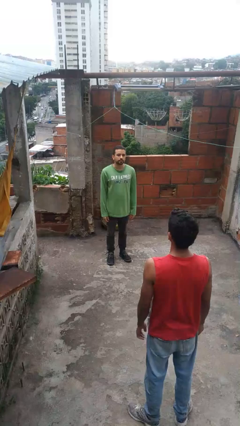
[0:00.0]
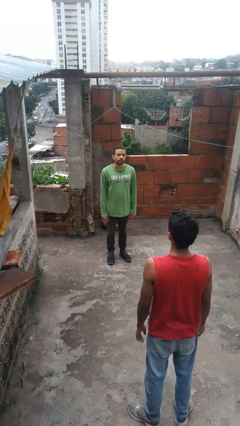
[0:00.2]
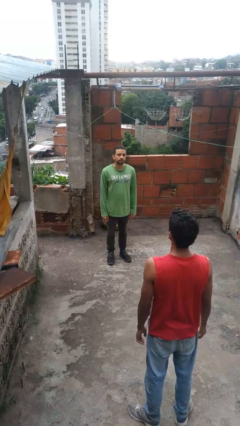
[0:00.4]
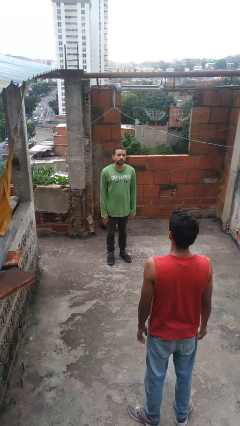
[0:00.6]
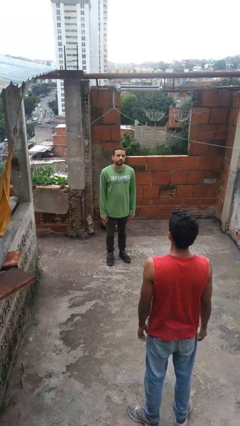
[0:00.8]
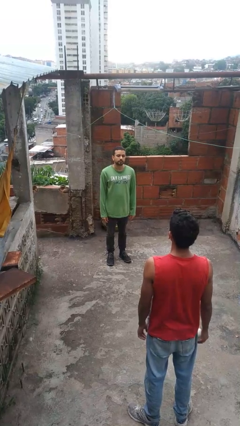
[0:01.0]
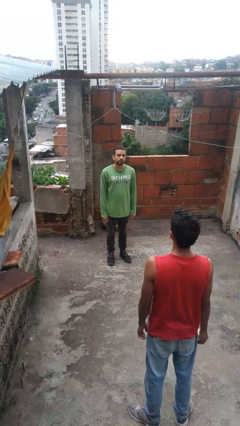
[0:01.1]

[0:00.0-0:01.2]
person catches object from person

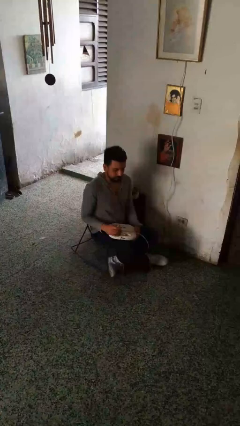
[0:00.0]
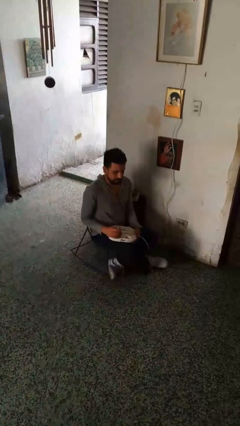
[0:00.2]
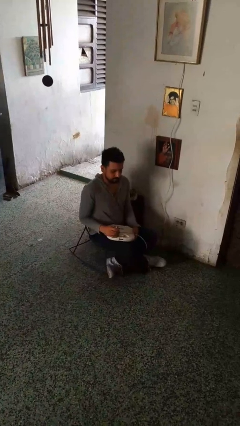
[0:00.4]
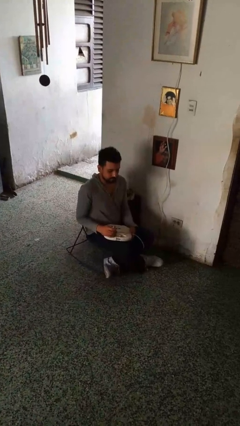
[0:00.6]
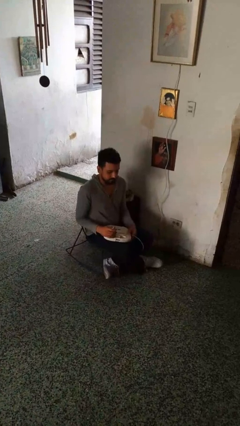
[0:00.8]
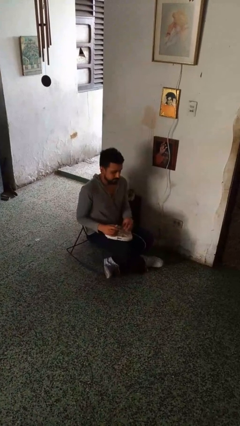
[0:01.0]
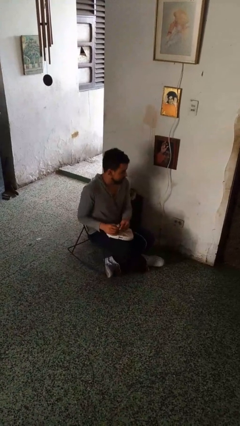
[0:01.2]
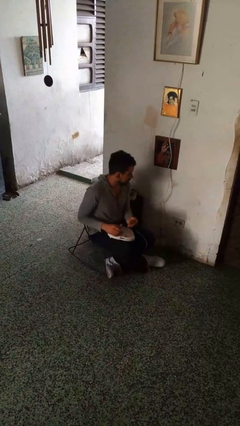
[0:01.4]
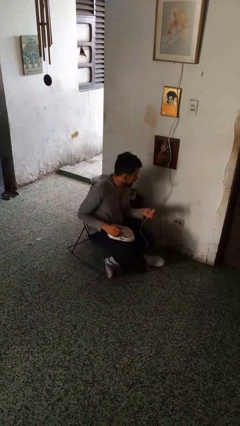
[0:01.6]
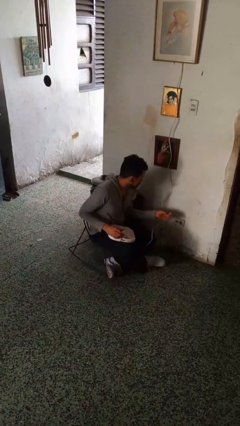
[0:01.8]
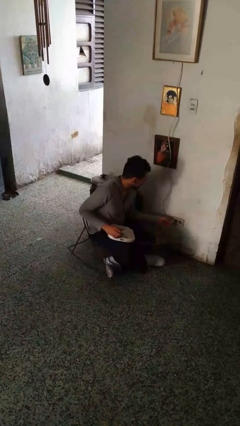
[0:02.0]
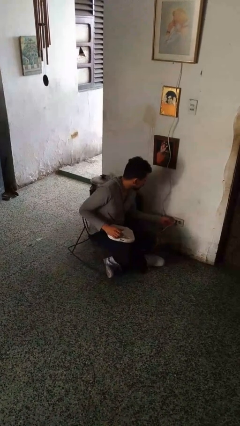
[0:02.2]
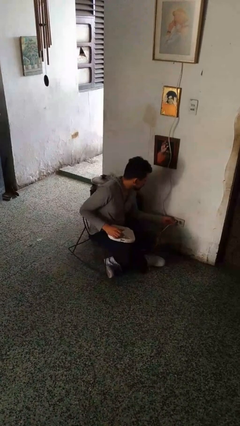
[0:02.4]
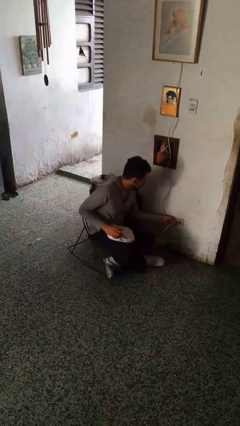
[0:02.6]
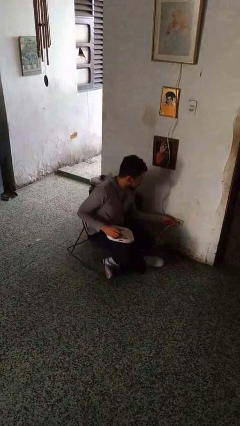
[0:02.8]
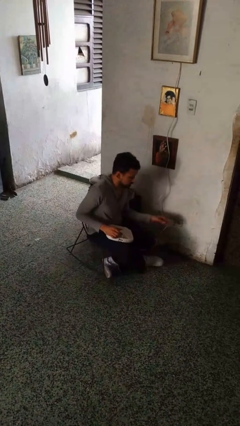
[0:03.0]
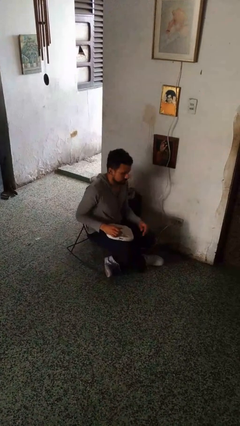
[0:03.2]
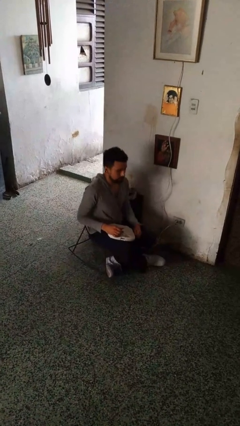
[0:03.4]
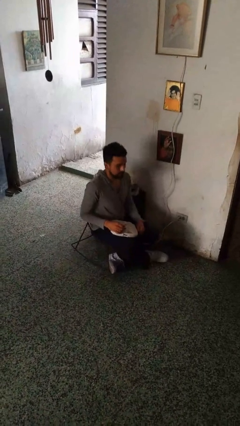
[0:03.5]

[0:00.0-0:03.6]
person plugs into electrical socket

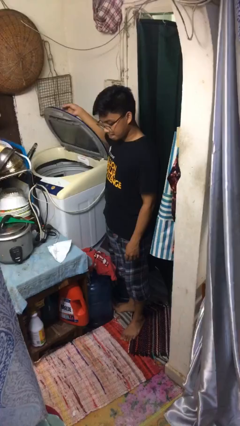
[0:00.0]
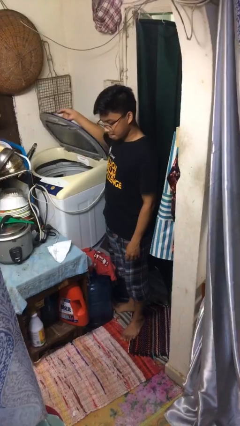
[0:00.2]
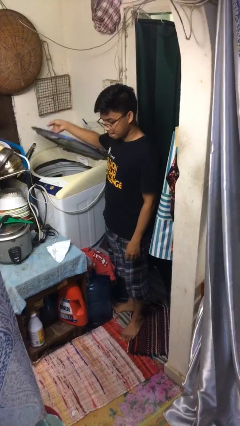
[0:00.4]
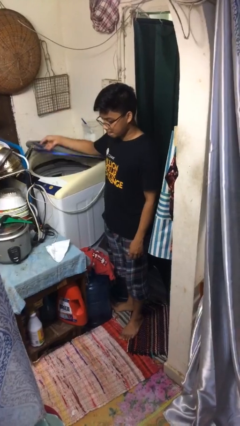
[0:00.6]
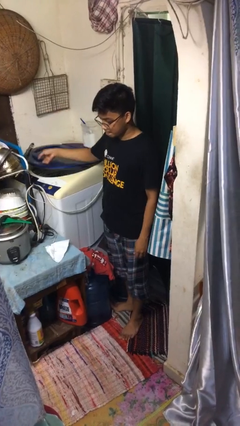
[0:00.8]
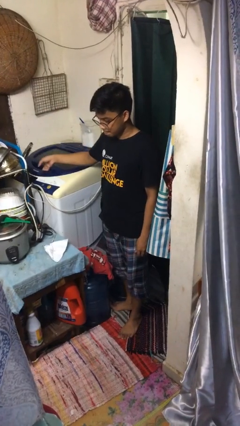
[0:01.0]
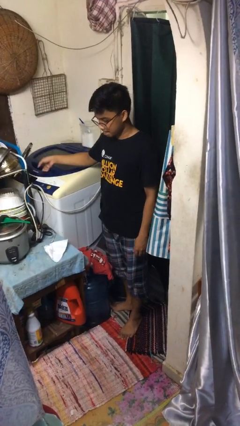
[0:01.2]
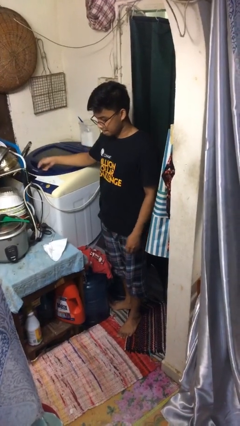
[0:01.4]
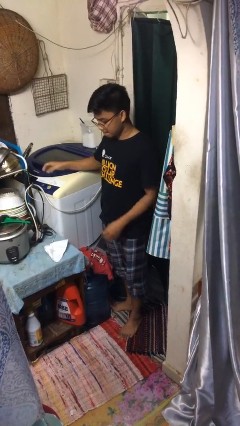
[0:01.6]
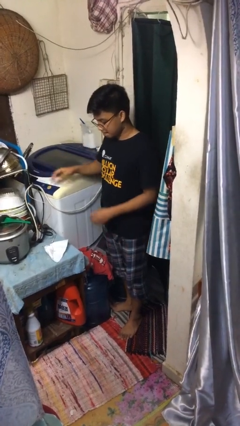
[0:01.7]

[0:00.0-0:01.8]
person closes clothes washer

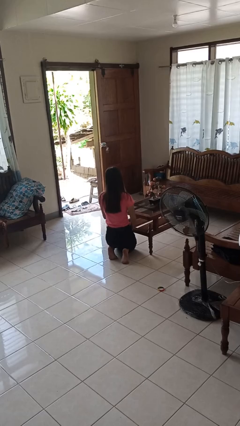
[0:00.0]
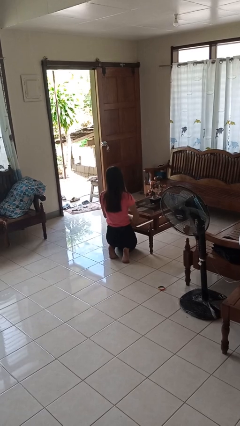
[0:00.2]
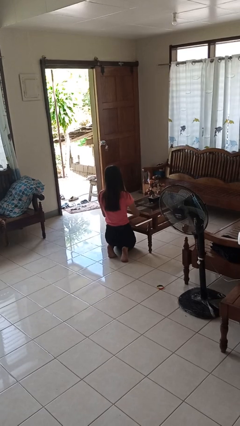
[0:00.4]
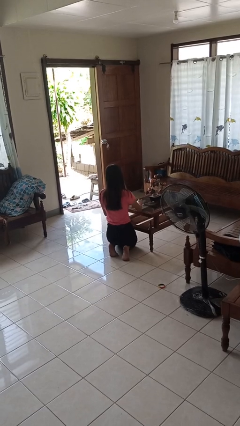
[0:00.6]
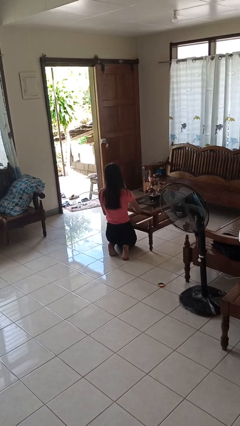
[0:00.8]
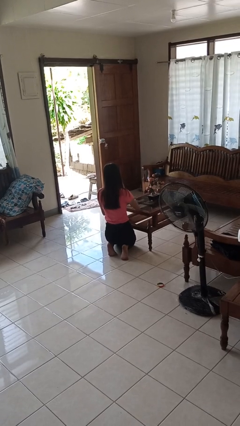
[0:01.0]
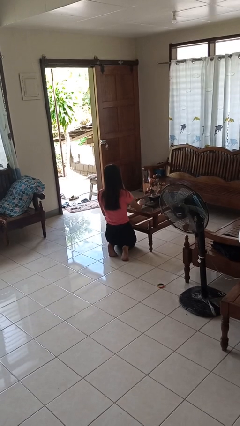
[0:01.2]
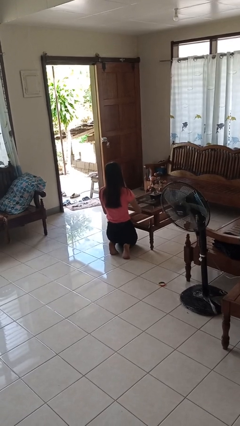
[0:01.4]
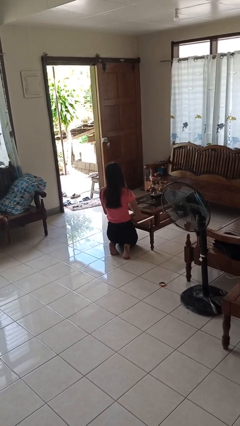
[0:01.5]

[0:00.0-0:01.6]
person cleans table with rag

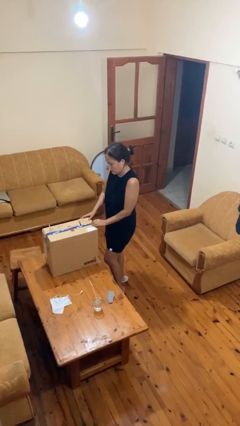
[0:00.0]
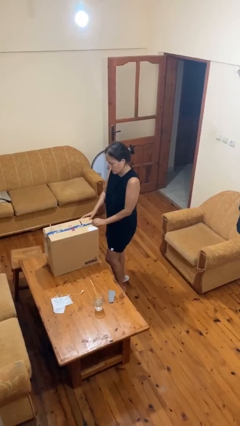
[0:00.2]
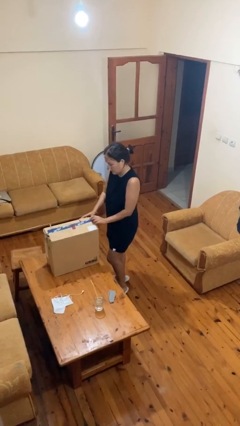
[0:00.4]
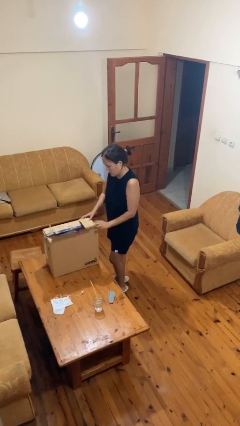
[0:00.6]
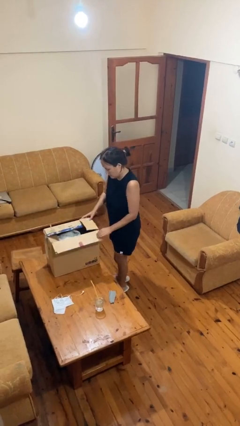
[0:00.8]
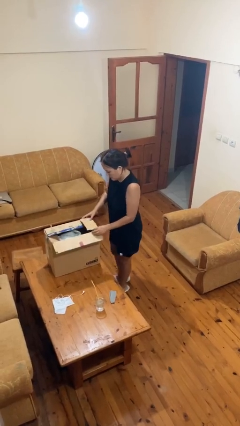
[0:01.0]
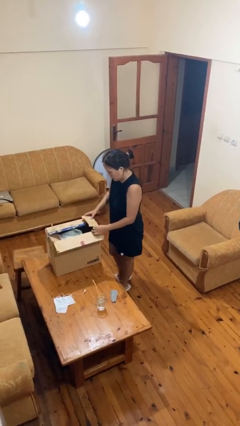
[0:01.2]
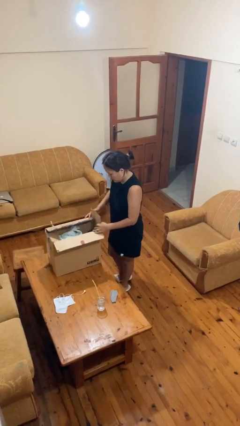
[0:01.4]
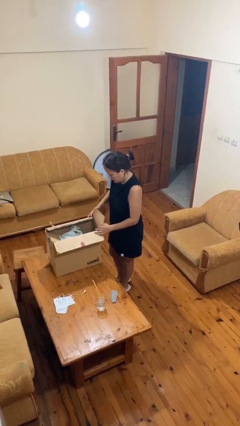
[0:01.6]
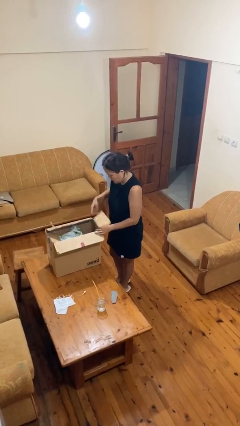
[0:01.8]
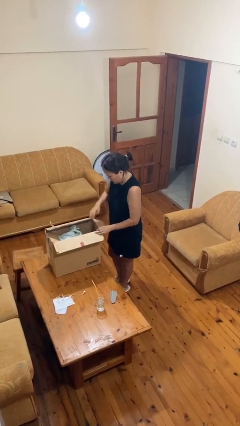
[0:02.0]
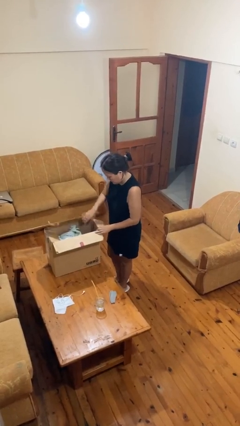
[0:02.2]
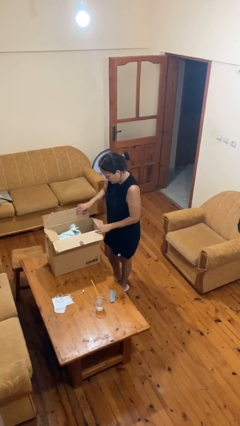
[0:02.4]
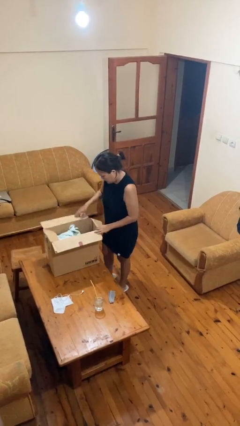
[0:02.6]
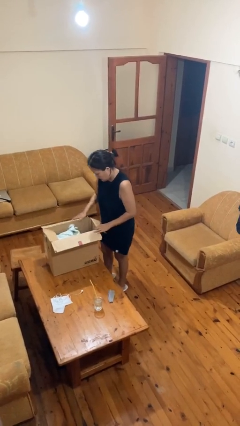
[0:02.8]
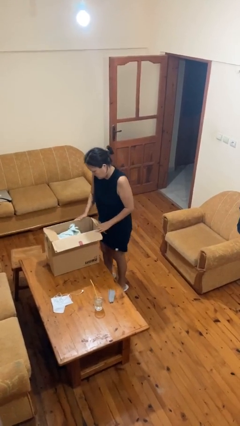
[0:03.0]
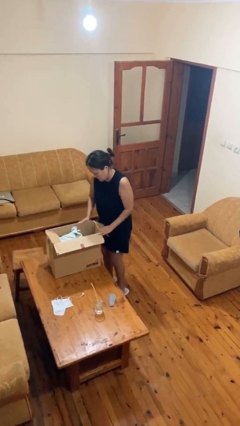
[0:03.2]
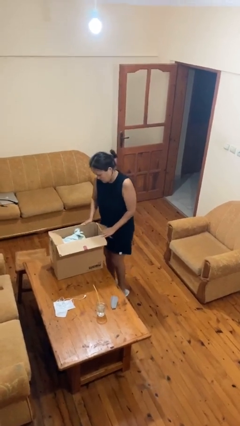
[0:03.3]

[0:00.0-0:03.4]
person opens box

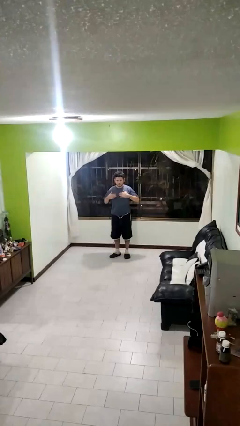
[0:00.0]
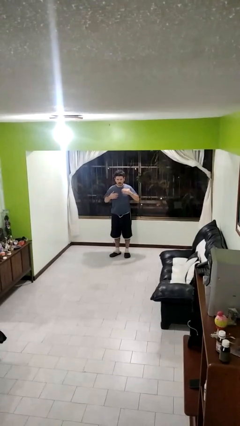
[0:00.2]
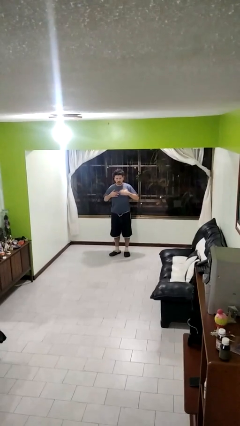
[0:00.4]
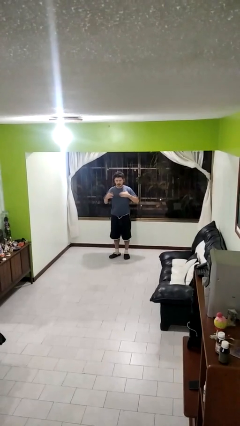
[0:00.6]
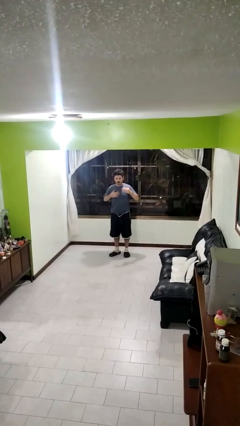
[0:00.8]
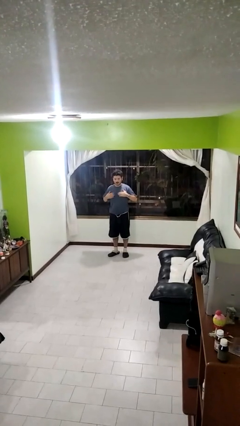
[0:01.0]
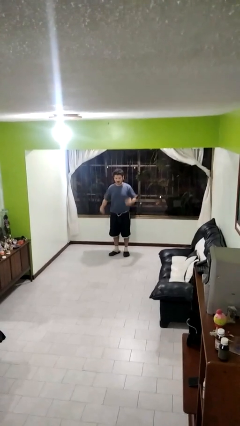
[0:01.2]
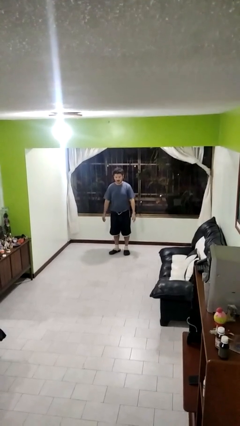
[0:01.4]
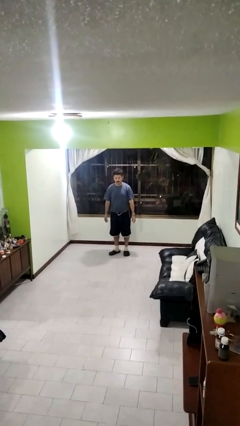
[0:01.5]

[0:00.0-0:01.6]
person drums on chest

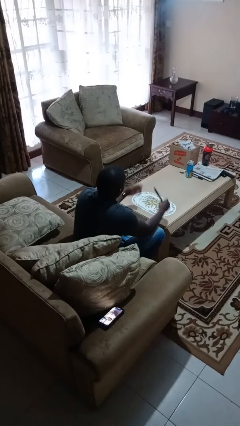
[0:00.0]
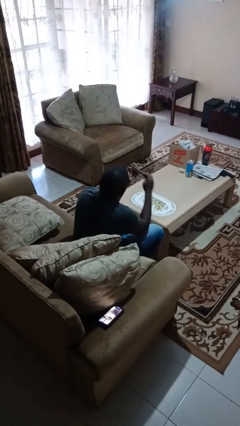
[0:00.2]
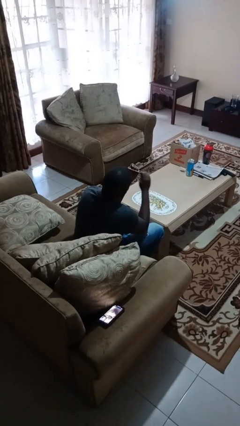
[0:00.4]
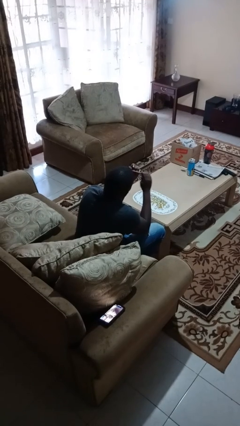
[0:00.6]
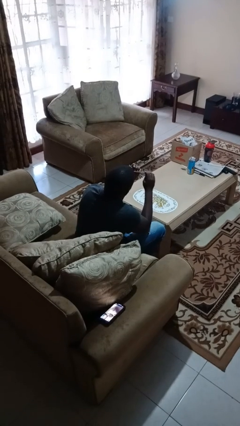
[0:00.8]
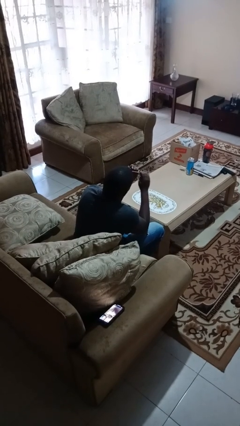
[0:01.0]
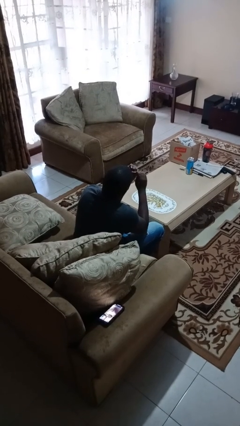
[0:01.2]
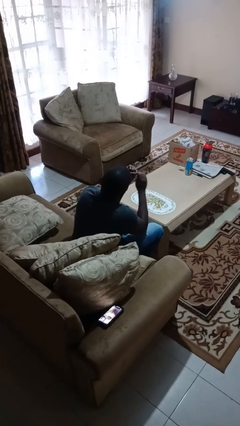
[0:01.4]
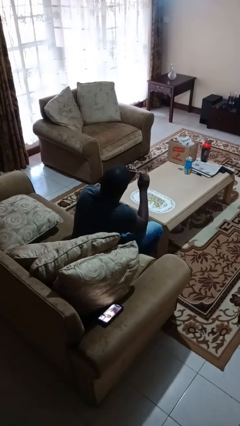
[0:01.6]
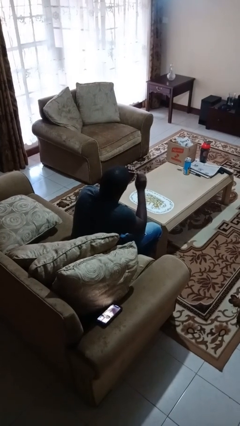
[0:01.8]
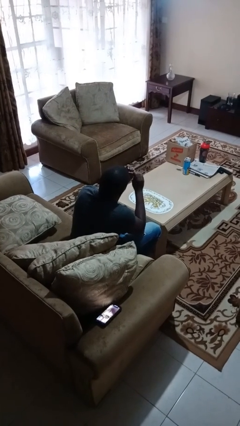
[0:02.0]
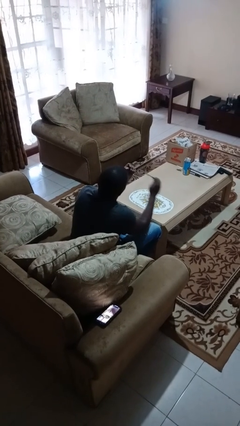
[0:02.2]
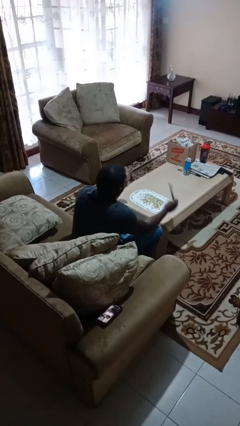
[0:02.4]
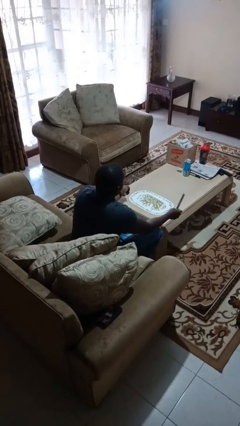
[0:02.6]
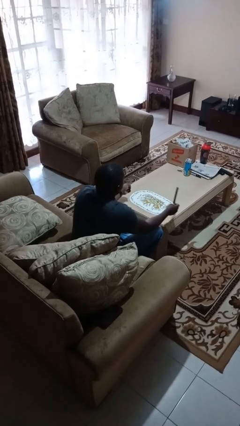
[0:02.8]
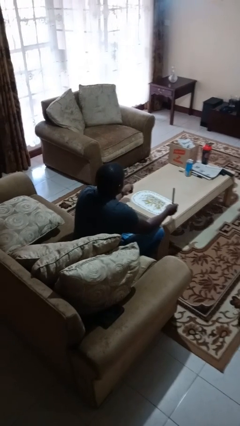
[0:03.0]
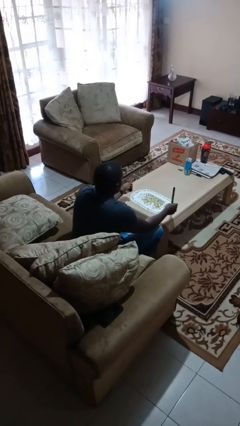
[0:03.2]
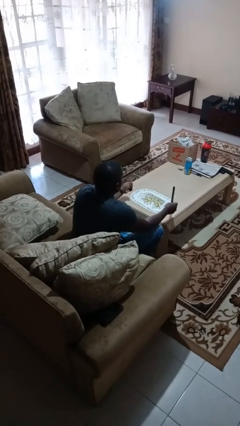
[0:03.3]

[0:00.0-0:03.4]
person files fingernails

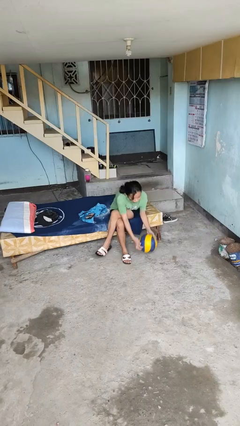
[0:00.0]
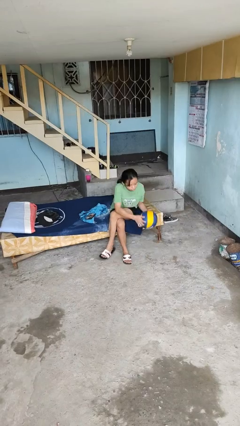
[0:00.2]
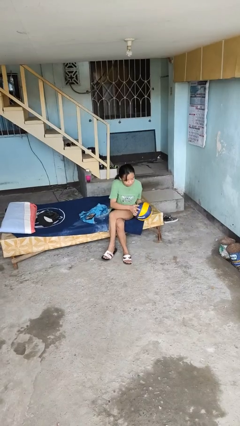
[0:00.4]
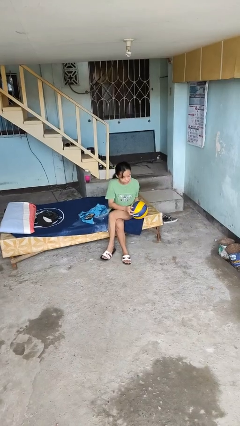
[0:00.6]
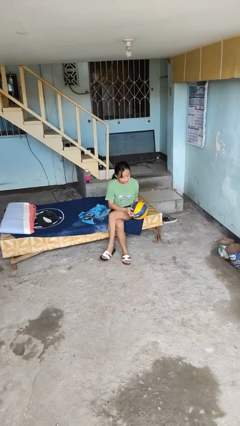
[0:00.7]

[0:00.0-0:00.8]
person picks up object from floor
